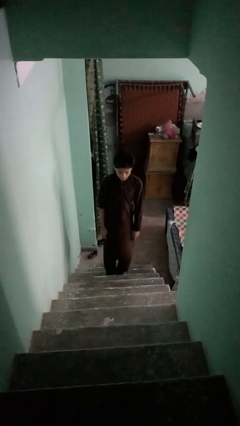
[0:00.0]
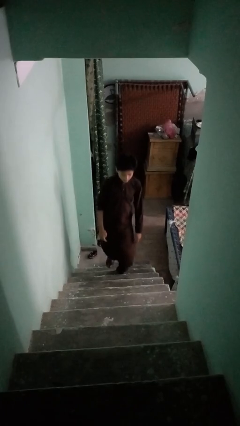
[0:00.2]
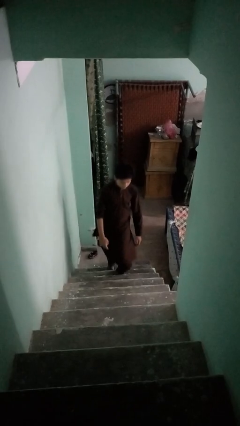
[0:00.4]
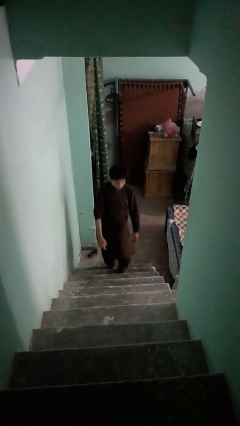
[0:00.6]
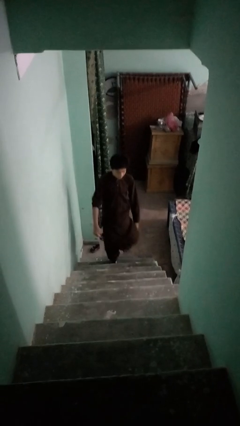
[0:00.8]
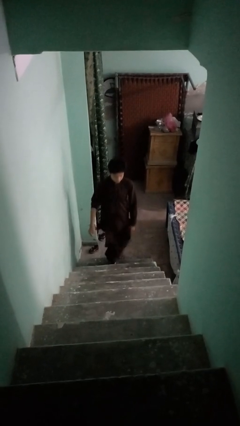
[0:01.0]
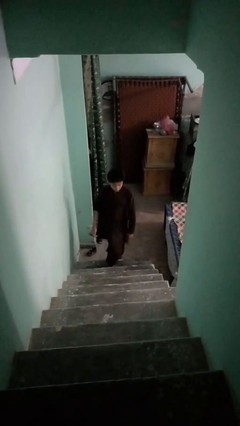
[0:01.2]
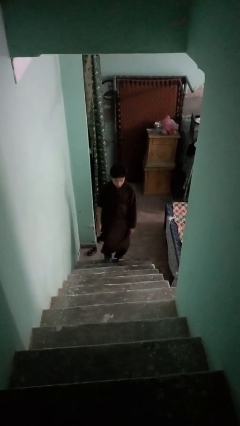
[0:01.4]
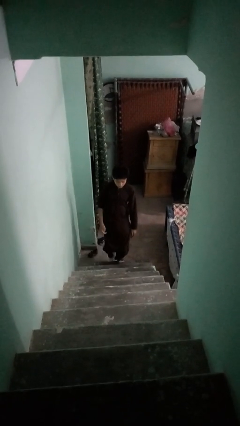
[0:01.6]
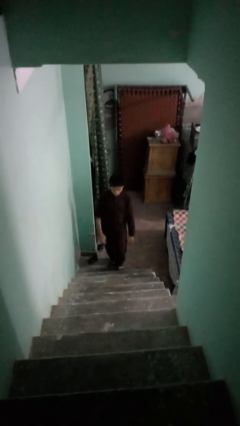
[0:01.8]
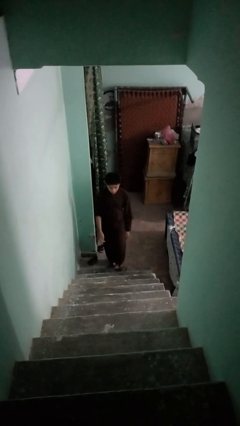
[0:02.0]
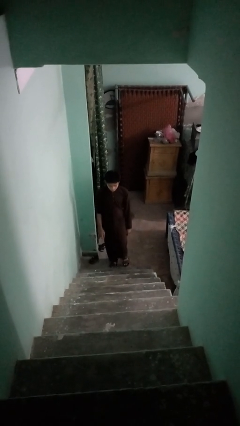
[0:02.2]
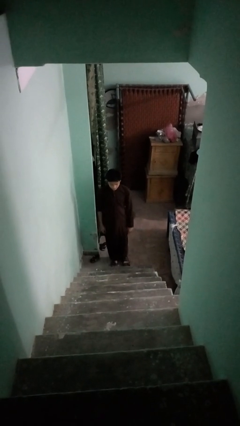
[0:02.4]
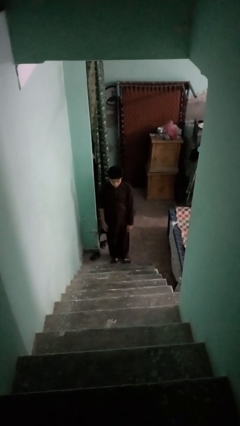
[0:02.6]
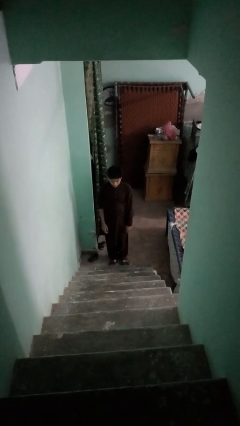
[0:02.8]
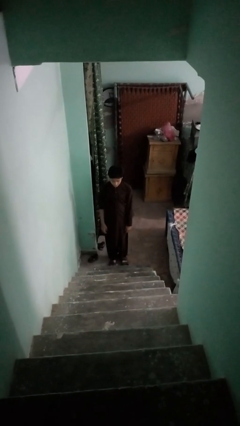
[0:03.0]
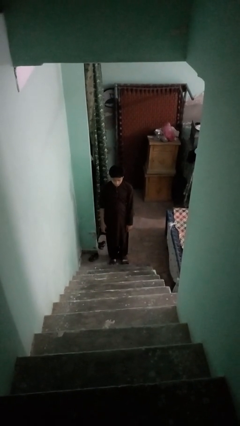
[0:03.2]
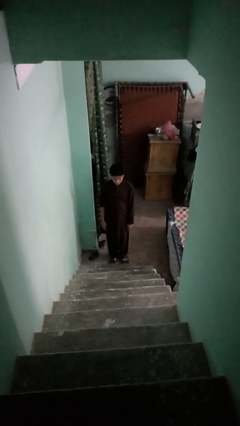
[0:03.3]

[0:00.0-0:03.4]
person climbs down stairs

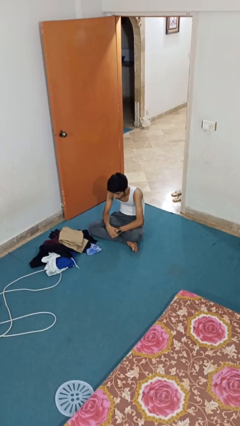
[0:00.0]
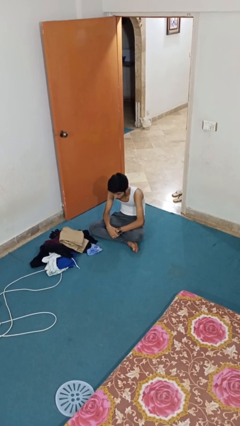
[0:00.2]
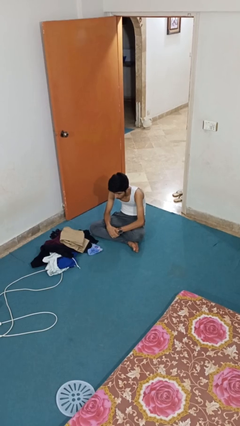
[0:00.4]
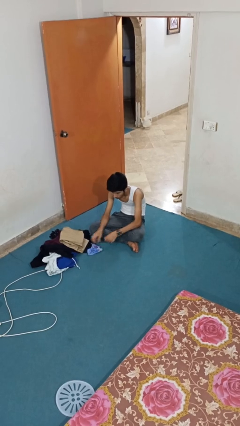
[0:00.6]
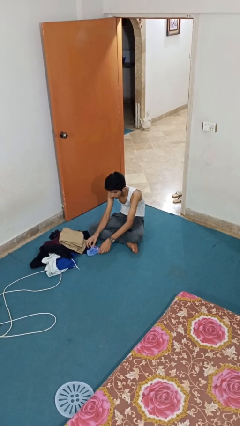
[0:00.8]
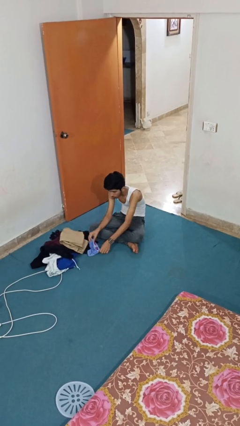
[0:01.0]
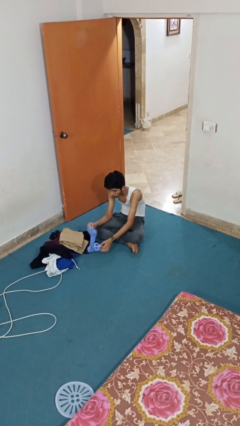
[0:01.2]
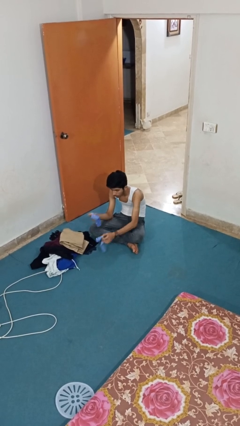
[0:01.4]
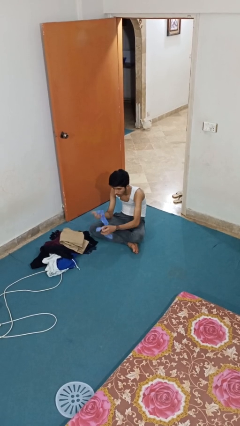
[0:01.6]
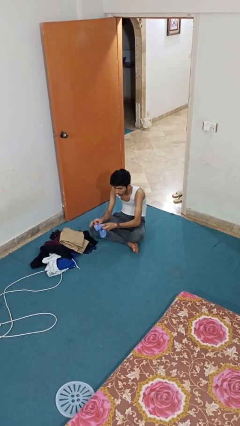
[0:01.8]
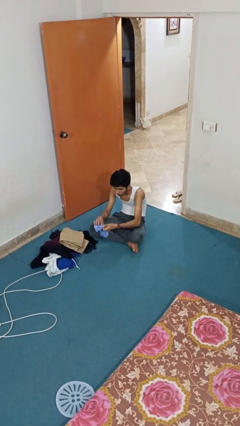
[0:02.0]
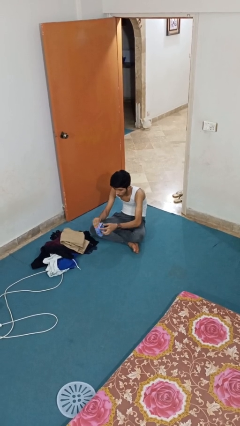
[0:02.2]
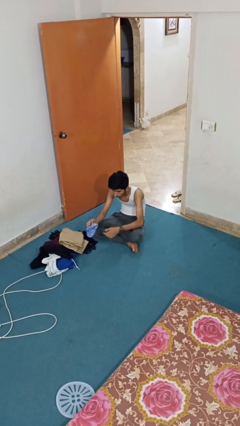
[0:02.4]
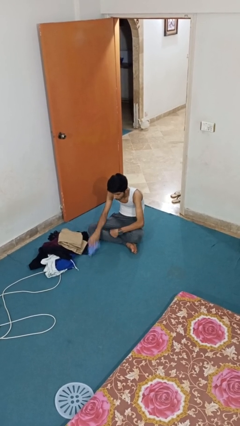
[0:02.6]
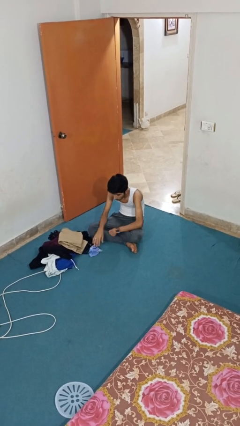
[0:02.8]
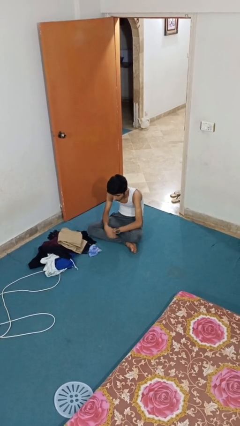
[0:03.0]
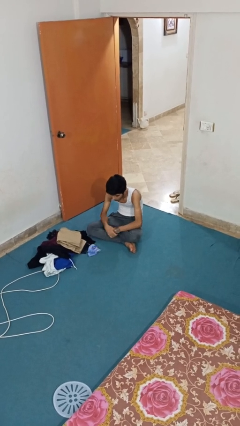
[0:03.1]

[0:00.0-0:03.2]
person folds socks

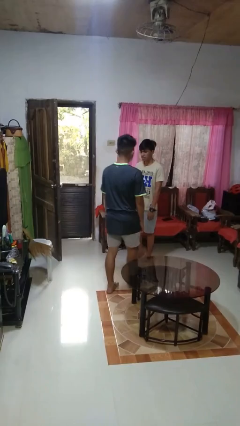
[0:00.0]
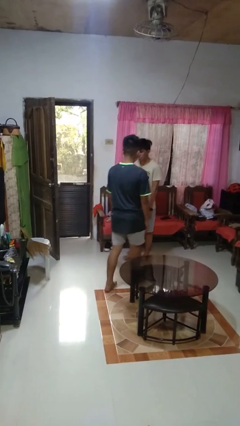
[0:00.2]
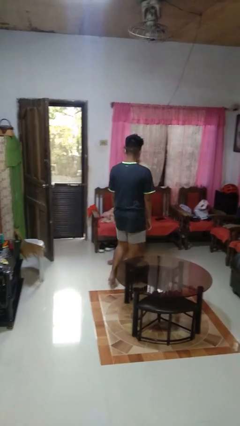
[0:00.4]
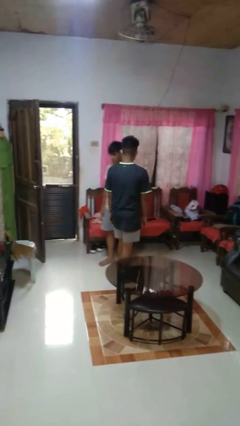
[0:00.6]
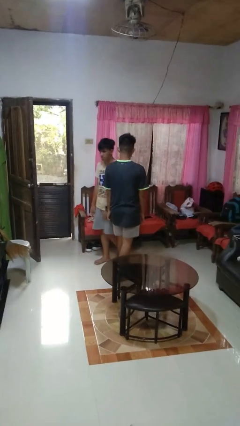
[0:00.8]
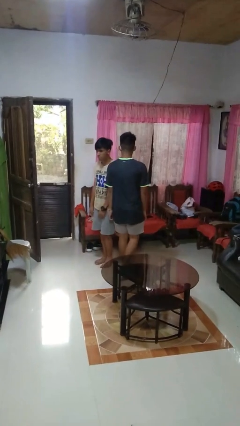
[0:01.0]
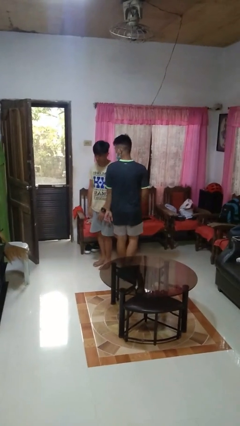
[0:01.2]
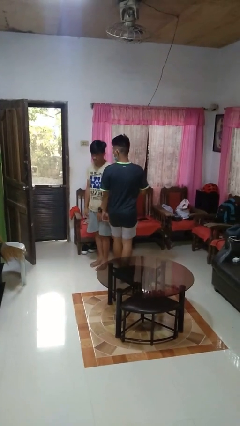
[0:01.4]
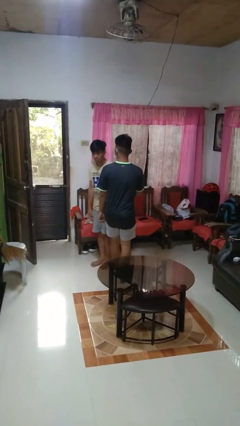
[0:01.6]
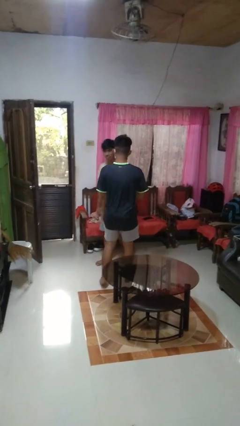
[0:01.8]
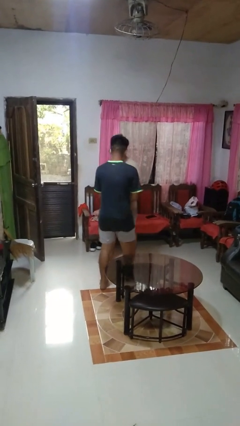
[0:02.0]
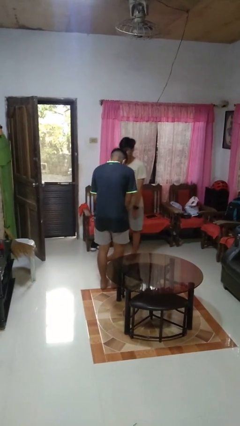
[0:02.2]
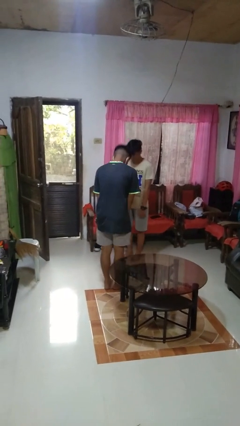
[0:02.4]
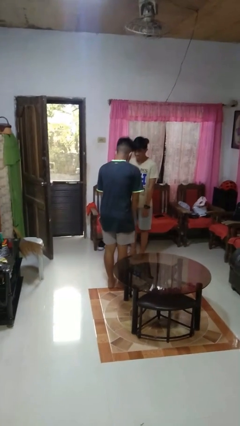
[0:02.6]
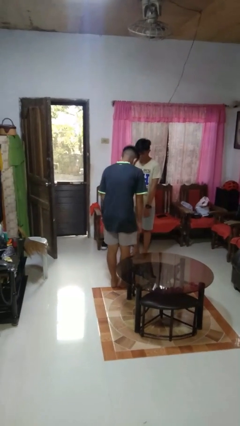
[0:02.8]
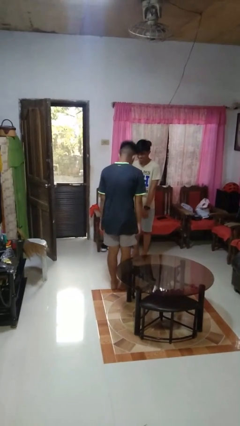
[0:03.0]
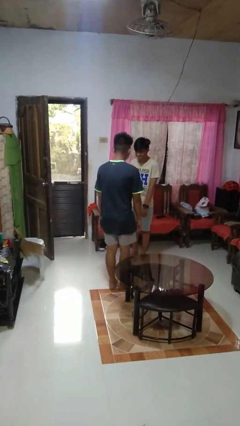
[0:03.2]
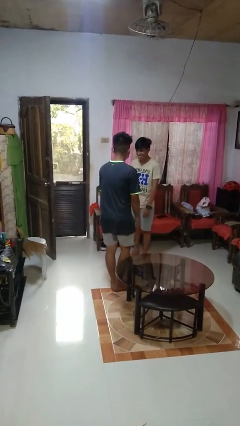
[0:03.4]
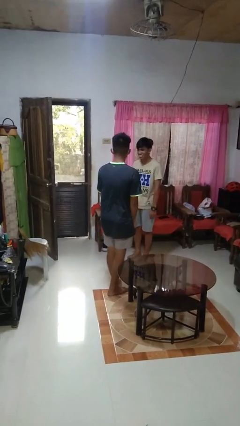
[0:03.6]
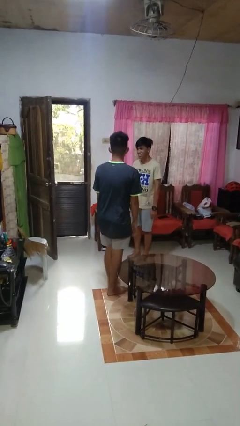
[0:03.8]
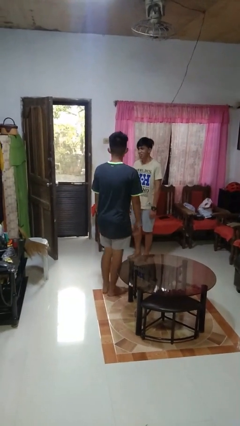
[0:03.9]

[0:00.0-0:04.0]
person bumps into person

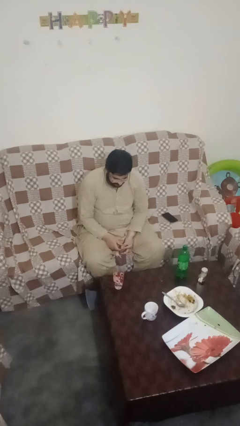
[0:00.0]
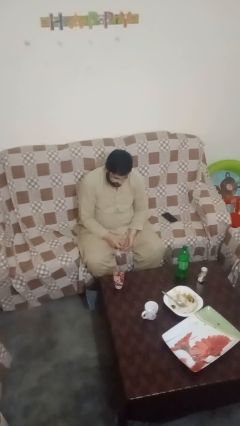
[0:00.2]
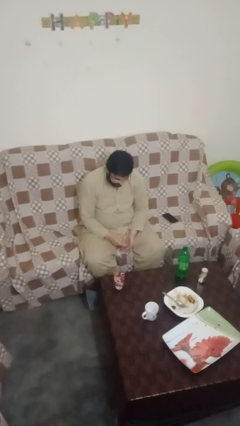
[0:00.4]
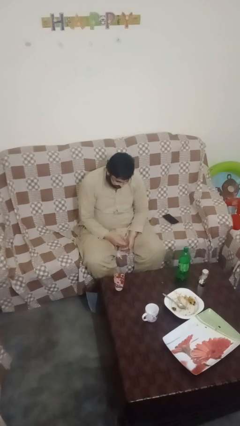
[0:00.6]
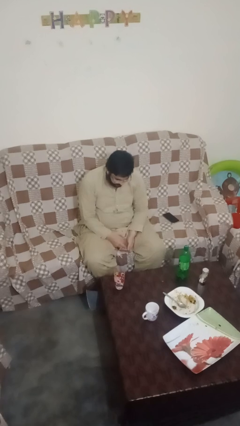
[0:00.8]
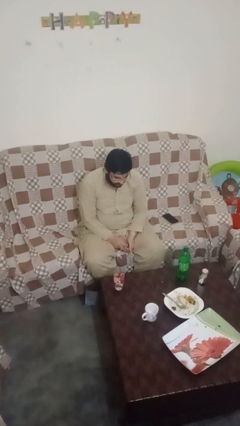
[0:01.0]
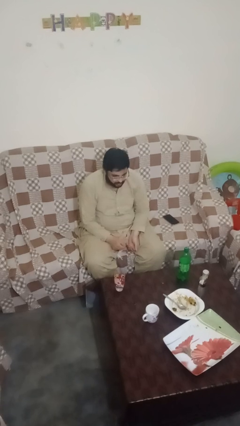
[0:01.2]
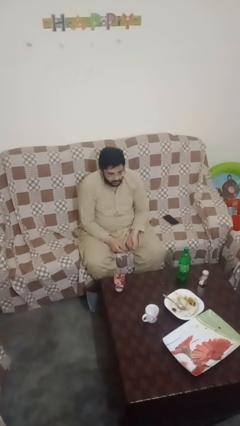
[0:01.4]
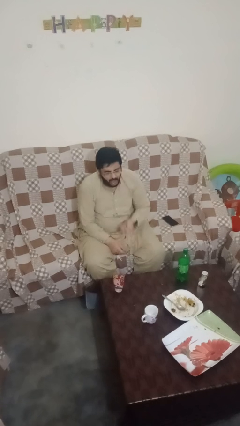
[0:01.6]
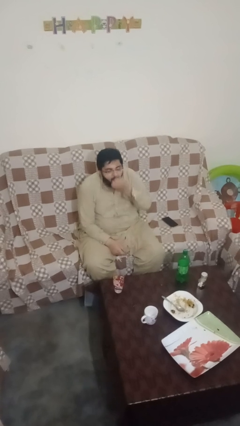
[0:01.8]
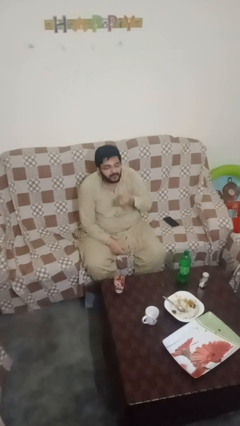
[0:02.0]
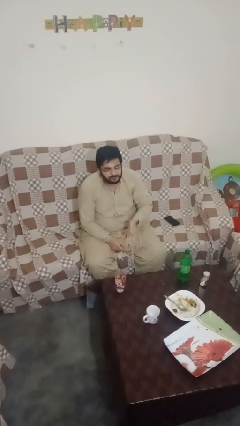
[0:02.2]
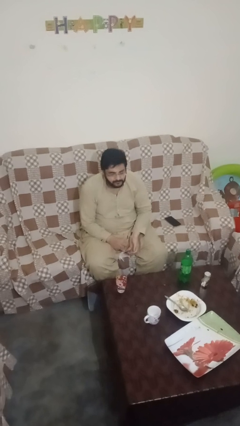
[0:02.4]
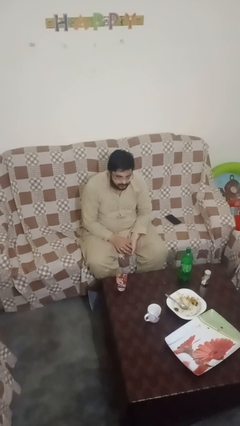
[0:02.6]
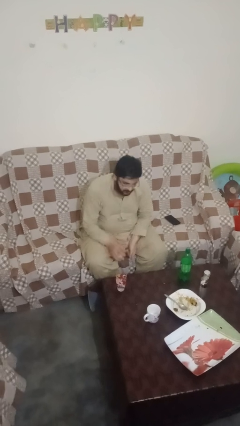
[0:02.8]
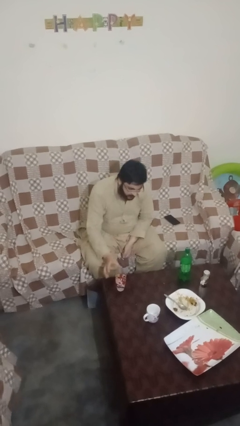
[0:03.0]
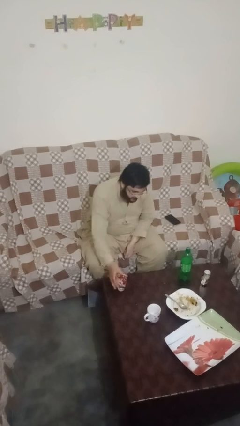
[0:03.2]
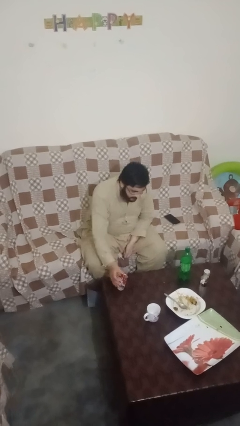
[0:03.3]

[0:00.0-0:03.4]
person takes medicine pills

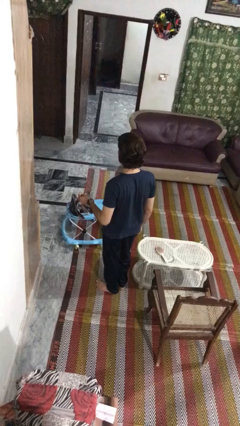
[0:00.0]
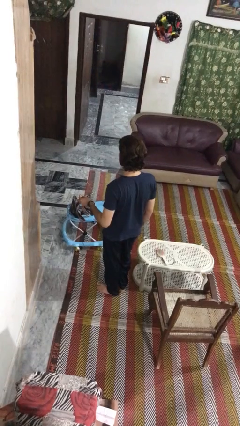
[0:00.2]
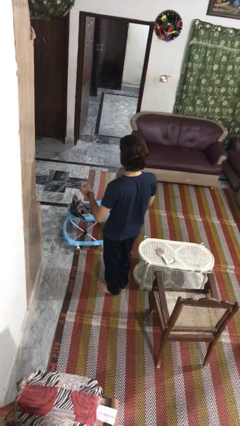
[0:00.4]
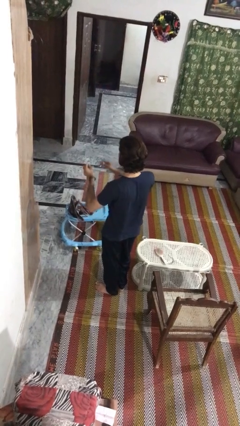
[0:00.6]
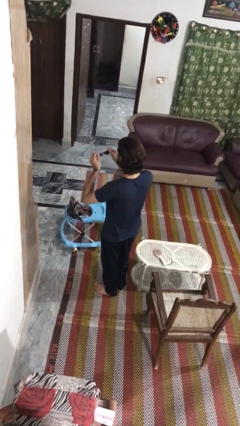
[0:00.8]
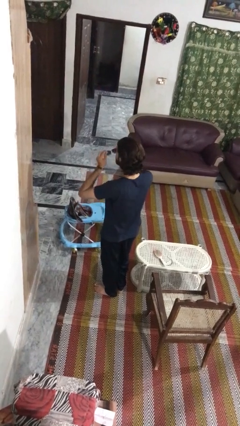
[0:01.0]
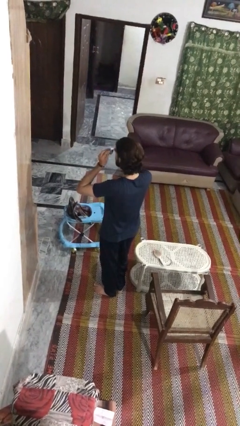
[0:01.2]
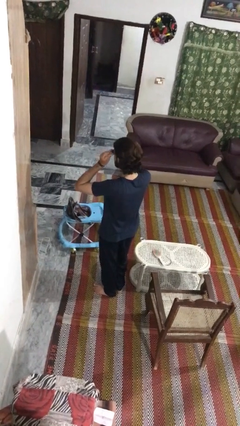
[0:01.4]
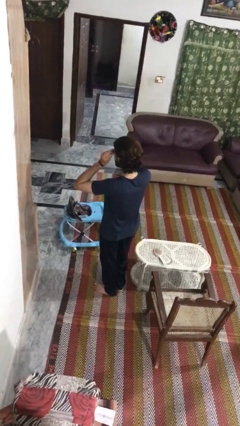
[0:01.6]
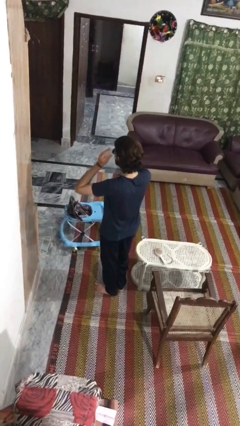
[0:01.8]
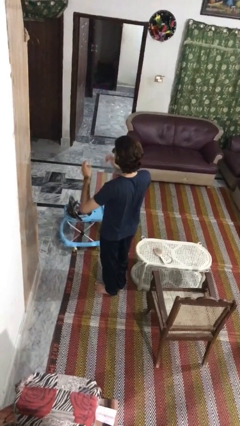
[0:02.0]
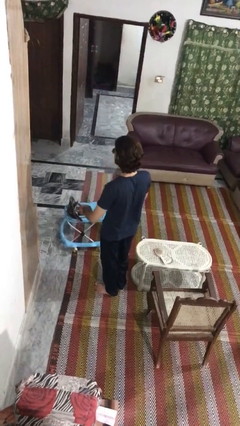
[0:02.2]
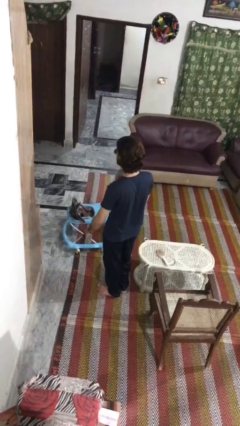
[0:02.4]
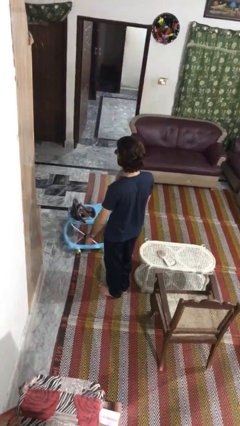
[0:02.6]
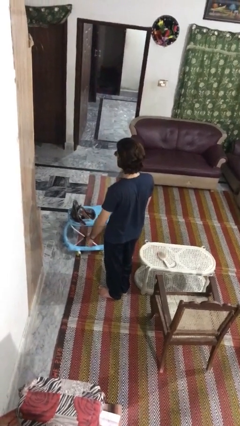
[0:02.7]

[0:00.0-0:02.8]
person puts on sunglasses

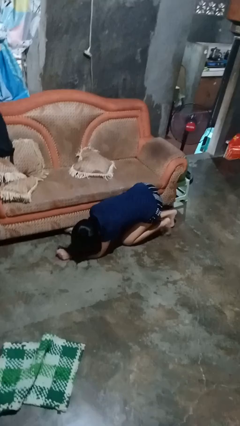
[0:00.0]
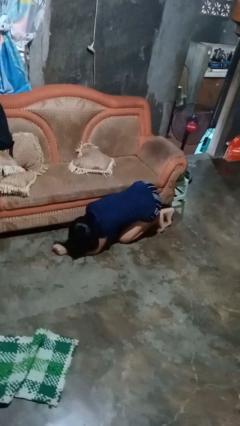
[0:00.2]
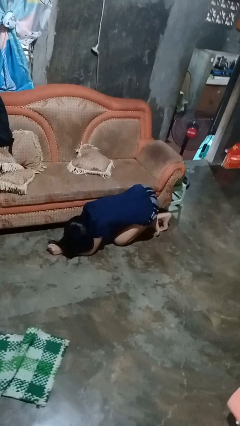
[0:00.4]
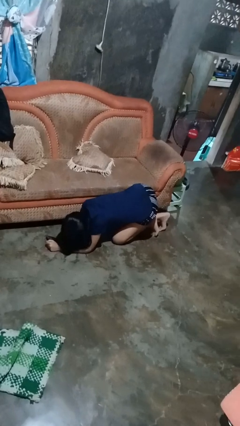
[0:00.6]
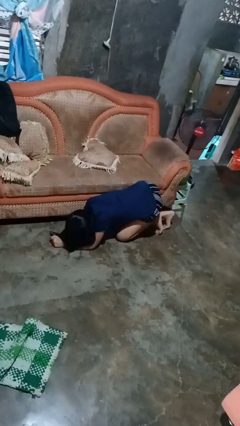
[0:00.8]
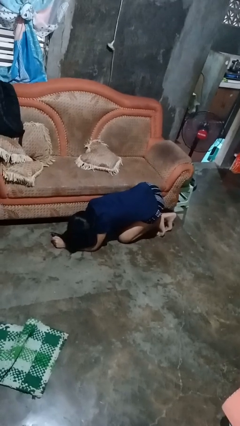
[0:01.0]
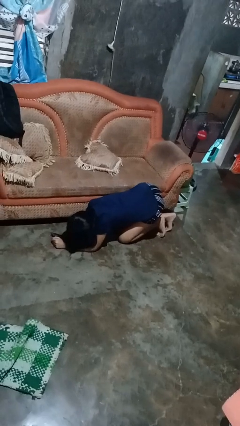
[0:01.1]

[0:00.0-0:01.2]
person searches under couch
